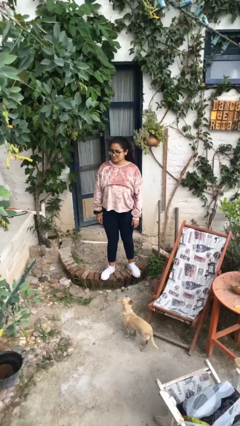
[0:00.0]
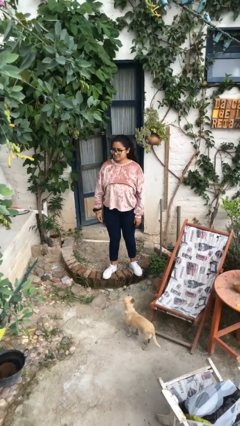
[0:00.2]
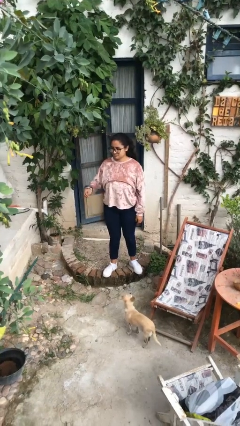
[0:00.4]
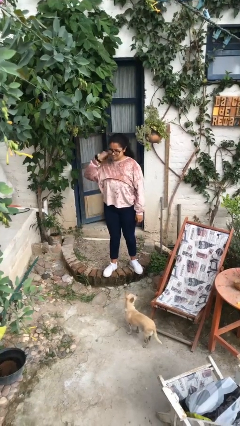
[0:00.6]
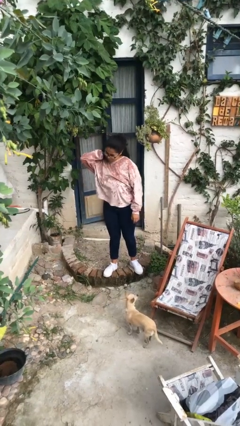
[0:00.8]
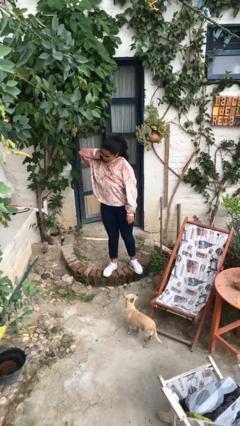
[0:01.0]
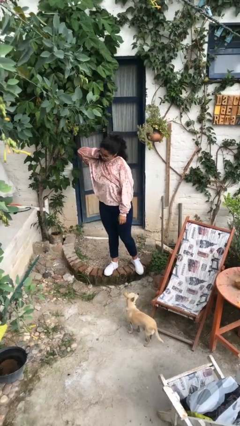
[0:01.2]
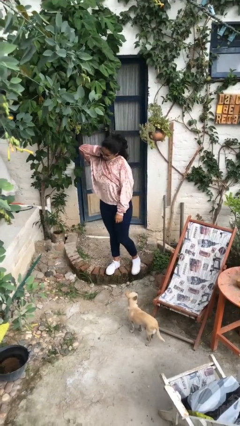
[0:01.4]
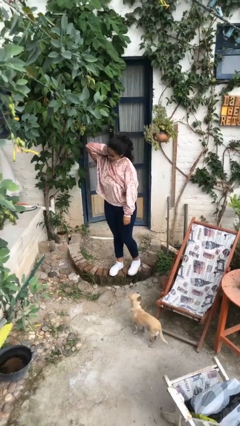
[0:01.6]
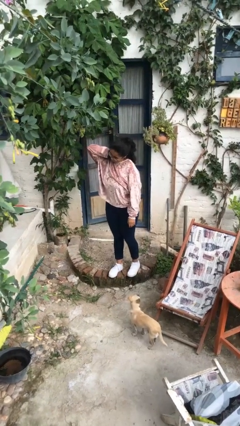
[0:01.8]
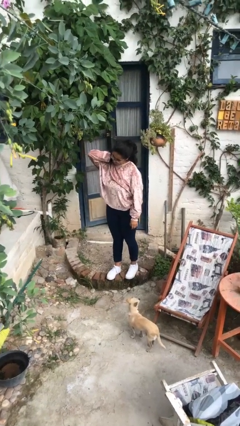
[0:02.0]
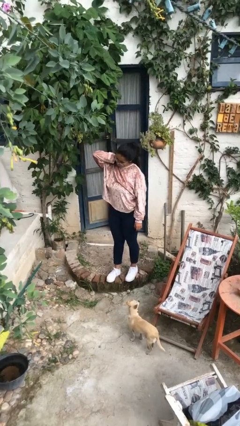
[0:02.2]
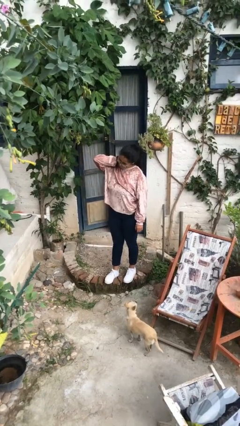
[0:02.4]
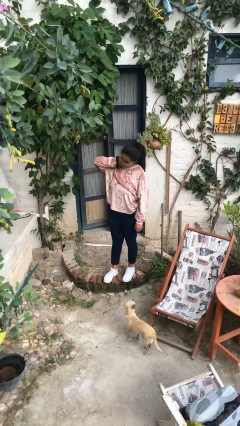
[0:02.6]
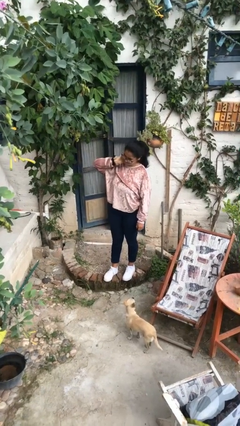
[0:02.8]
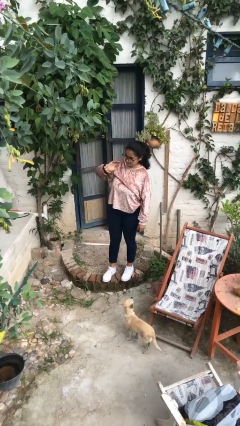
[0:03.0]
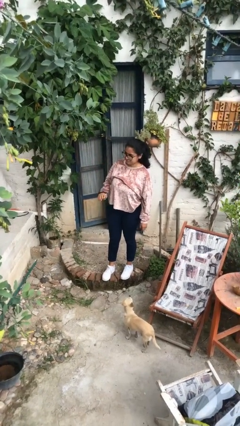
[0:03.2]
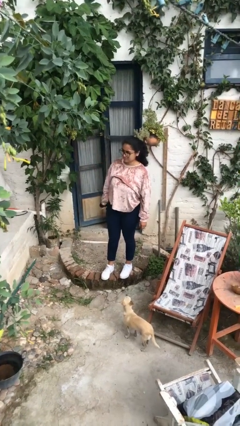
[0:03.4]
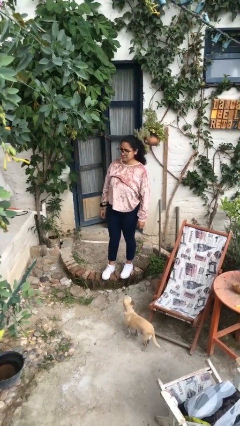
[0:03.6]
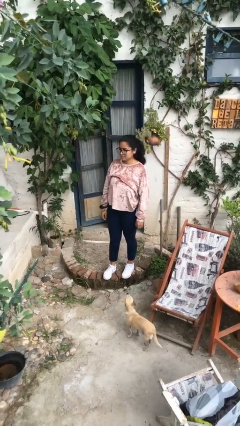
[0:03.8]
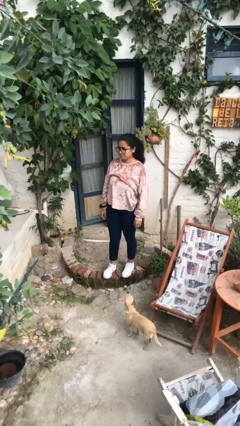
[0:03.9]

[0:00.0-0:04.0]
person rubs neck

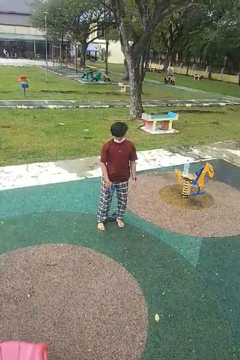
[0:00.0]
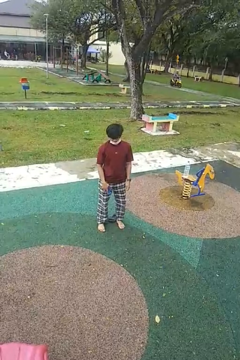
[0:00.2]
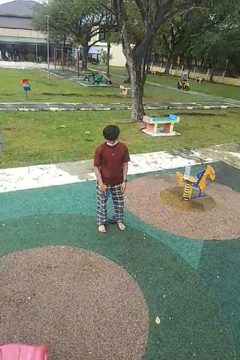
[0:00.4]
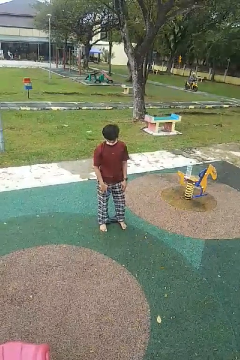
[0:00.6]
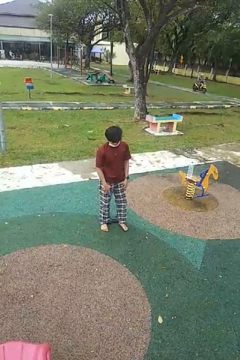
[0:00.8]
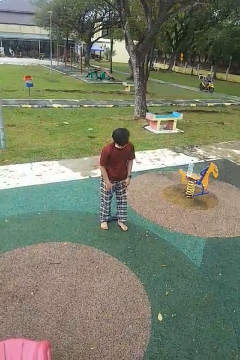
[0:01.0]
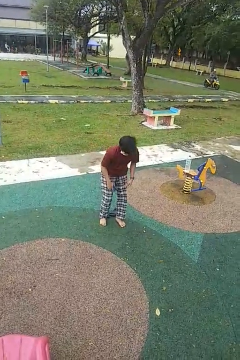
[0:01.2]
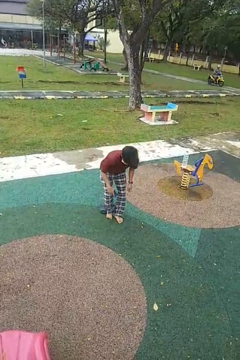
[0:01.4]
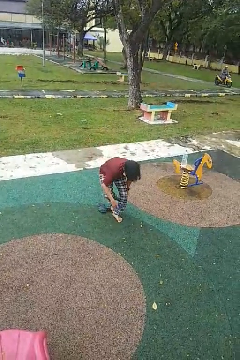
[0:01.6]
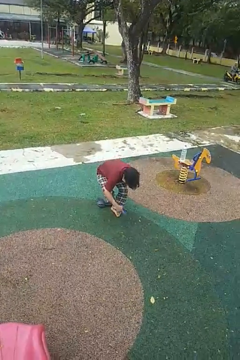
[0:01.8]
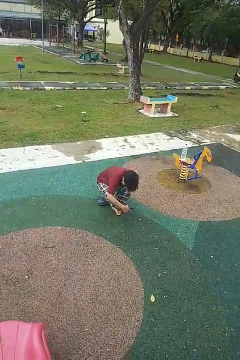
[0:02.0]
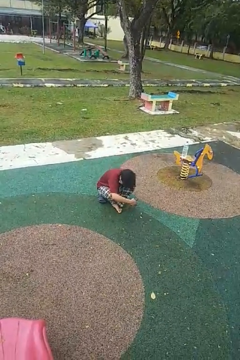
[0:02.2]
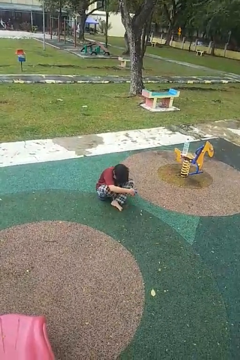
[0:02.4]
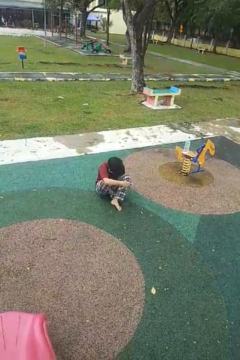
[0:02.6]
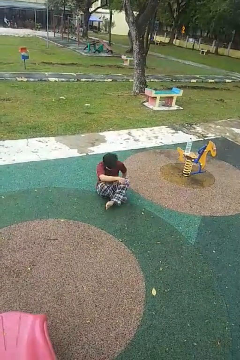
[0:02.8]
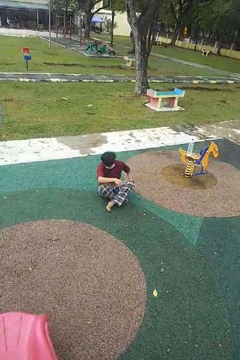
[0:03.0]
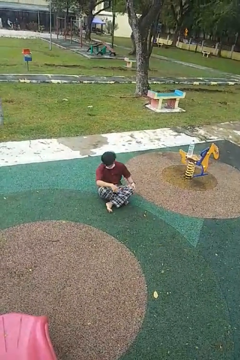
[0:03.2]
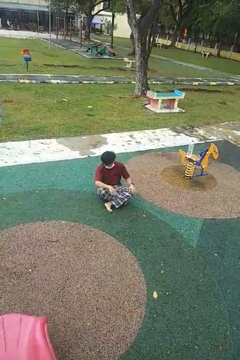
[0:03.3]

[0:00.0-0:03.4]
person sits crisscross

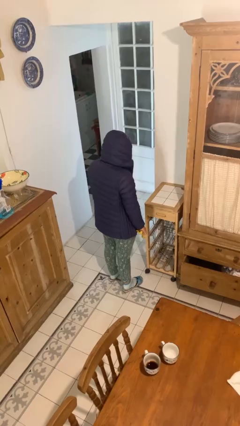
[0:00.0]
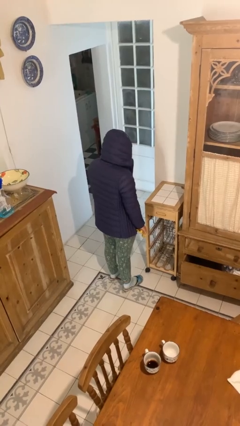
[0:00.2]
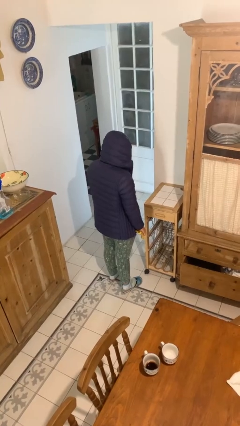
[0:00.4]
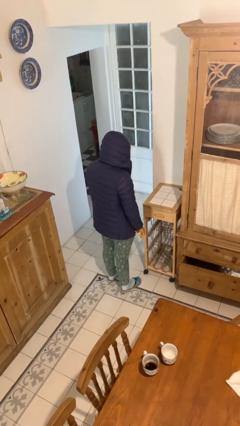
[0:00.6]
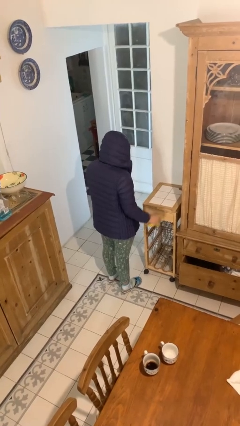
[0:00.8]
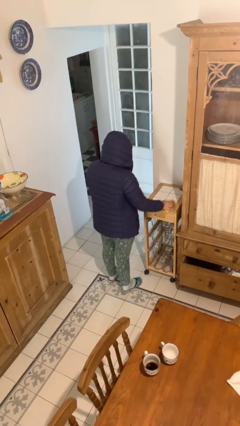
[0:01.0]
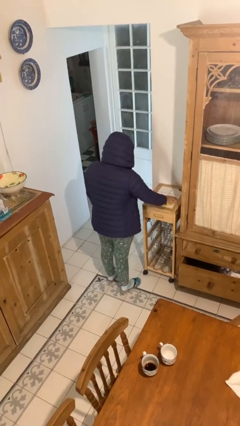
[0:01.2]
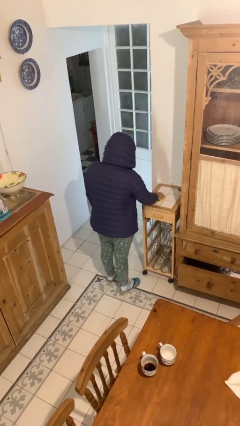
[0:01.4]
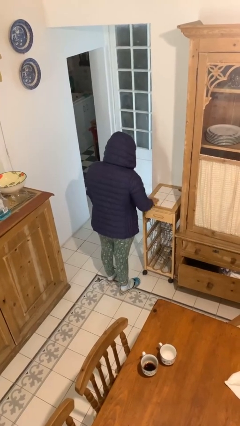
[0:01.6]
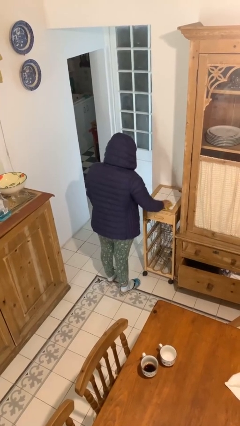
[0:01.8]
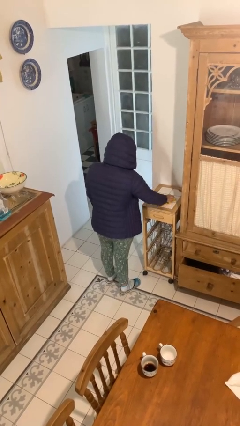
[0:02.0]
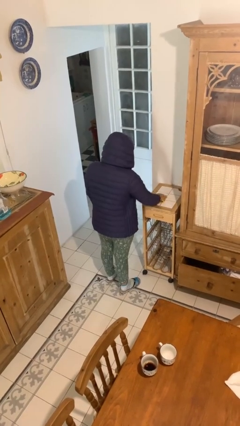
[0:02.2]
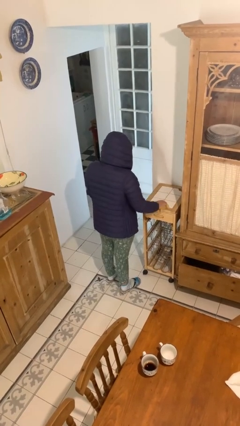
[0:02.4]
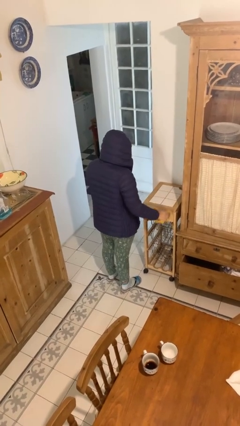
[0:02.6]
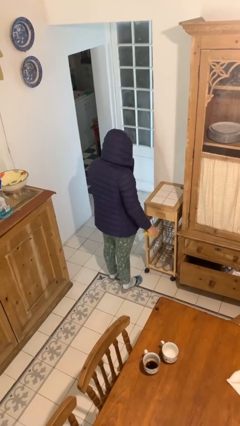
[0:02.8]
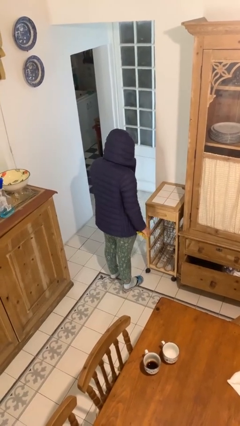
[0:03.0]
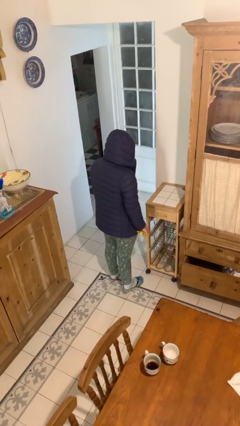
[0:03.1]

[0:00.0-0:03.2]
person cleans table with rag

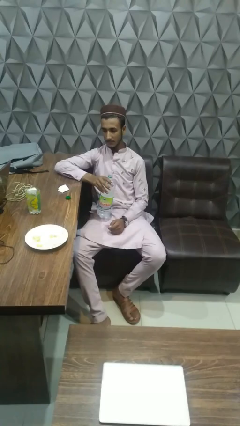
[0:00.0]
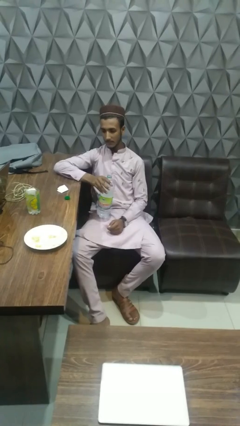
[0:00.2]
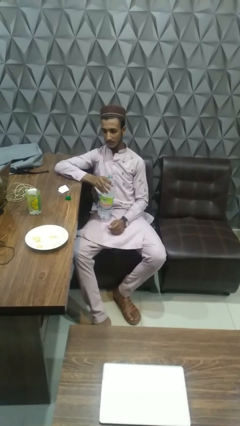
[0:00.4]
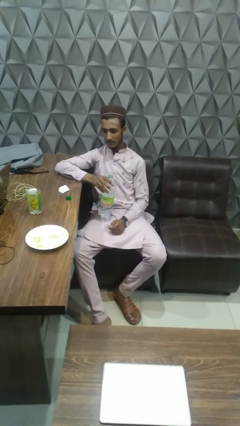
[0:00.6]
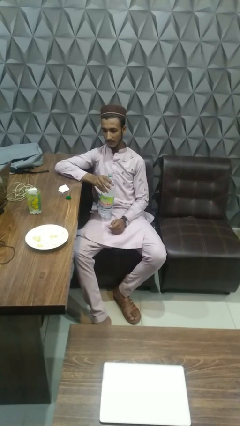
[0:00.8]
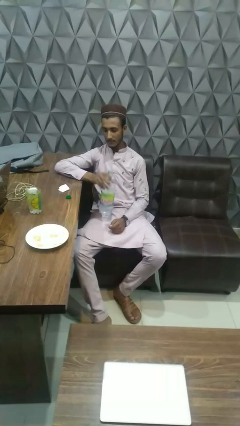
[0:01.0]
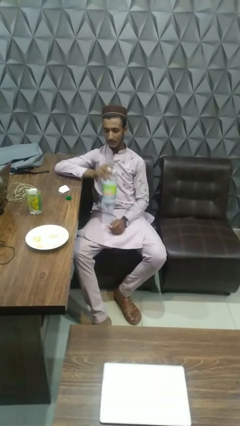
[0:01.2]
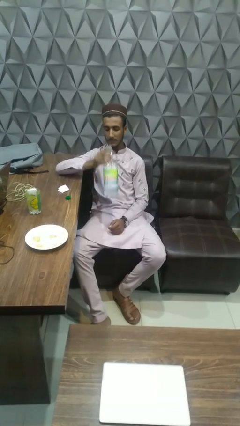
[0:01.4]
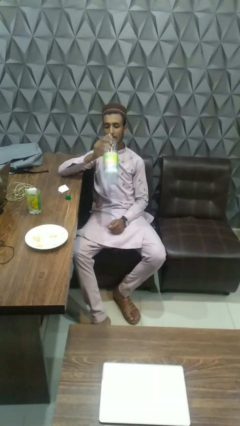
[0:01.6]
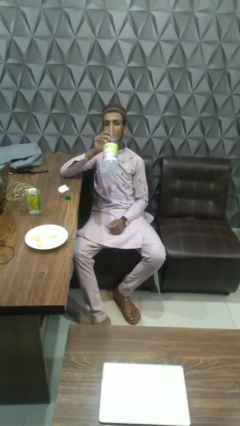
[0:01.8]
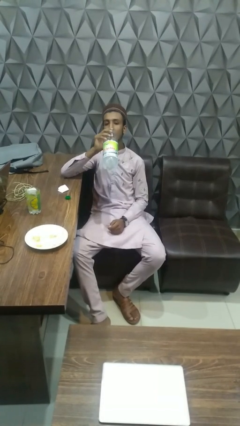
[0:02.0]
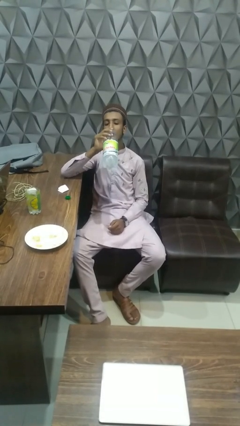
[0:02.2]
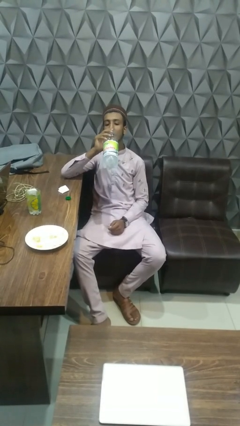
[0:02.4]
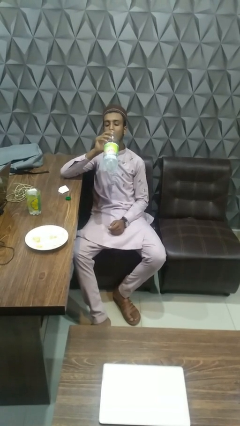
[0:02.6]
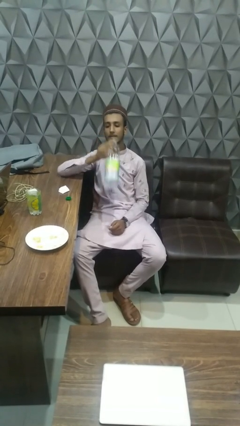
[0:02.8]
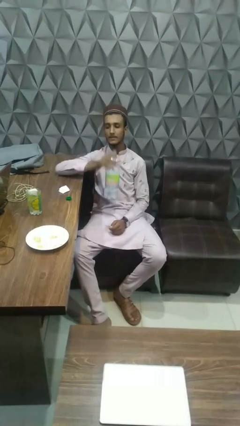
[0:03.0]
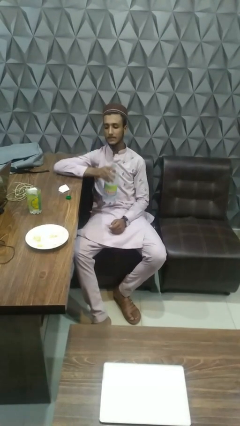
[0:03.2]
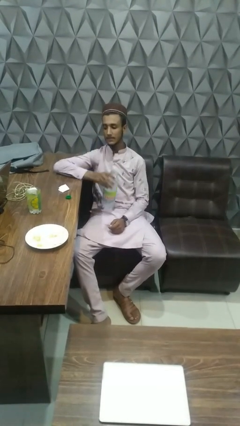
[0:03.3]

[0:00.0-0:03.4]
person drinks from bottle

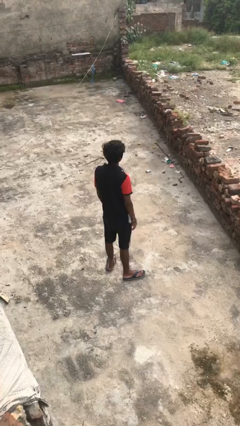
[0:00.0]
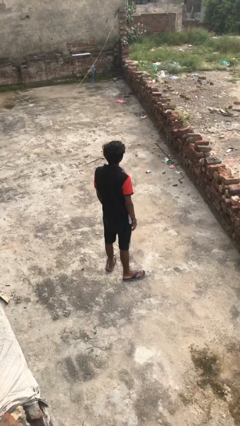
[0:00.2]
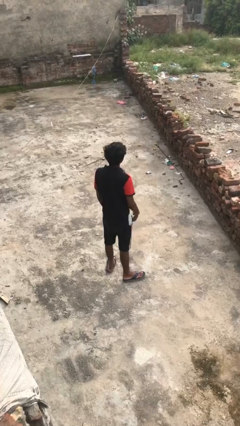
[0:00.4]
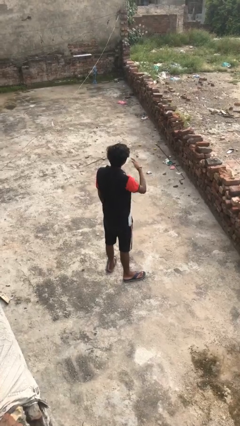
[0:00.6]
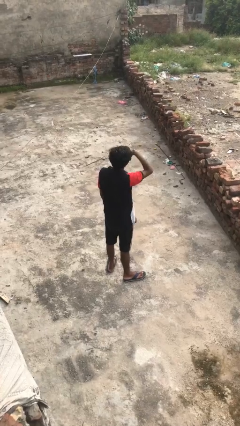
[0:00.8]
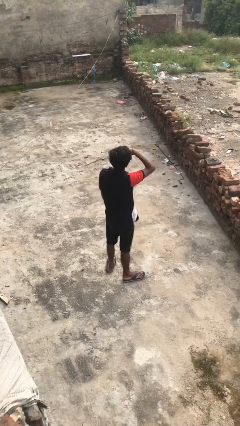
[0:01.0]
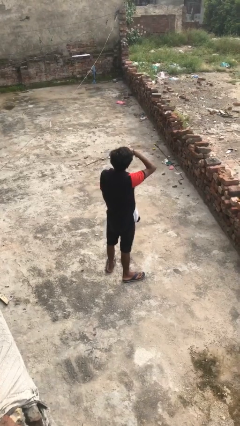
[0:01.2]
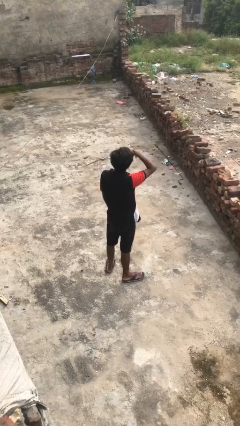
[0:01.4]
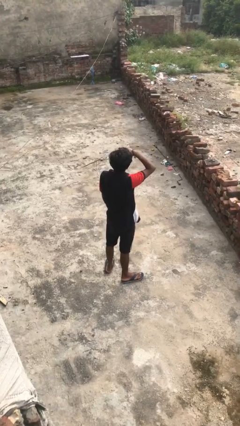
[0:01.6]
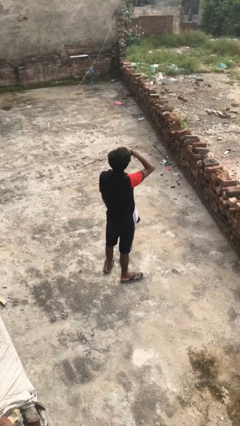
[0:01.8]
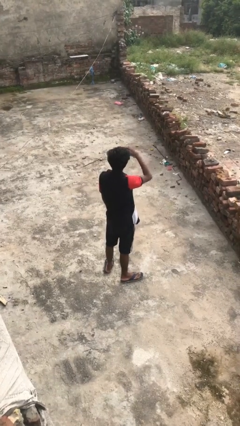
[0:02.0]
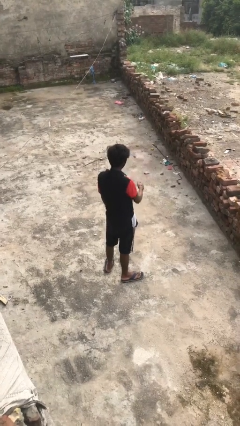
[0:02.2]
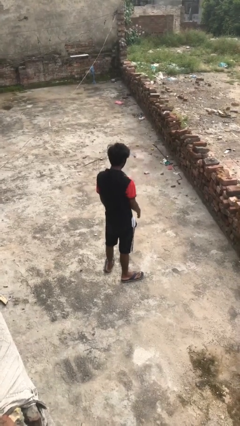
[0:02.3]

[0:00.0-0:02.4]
person shades eyes

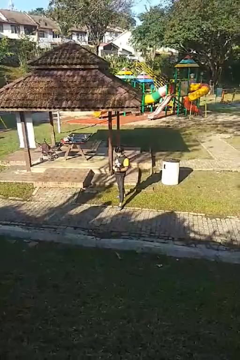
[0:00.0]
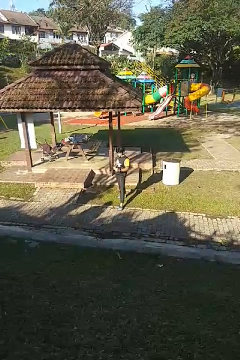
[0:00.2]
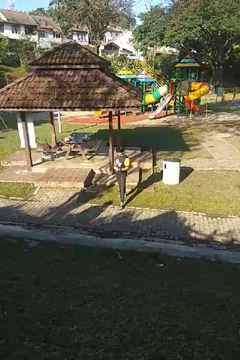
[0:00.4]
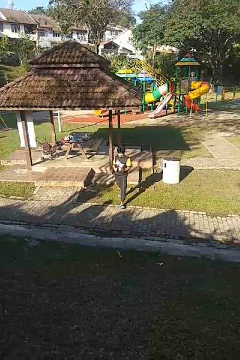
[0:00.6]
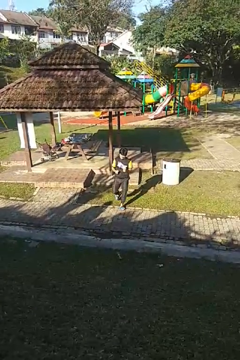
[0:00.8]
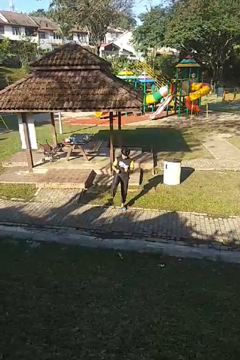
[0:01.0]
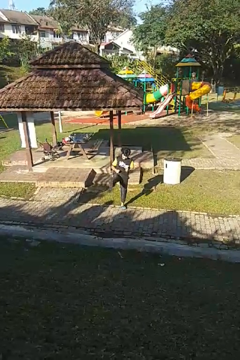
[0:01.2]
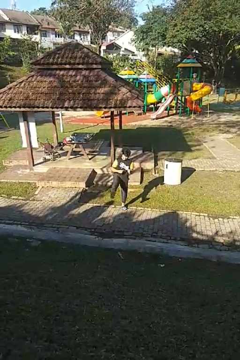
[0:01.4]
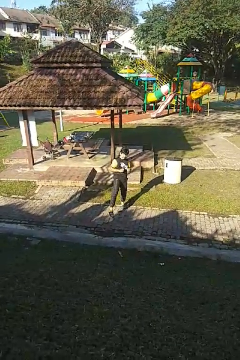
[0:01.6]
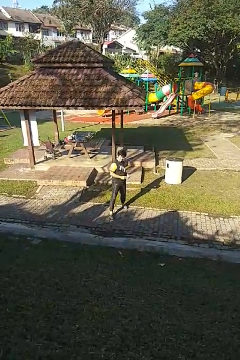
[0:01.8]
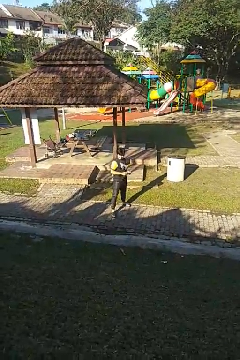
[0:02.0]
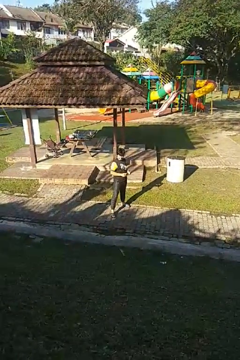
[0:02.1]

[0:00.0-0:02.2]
person karate kicks
